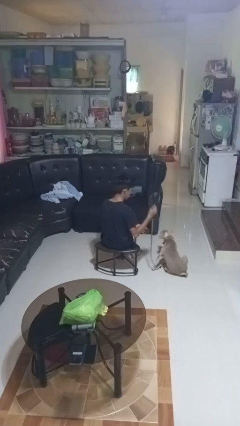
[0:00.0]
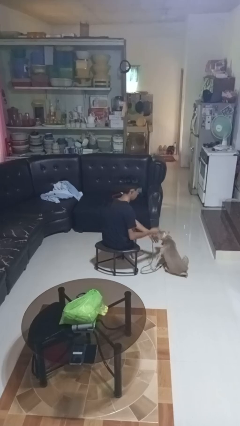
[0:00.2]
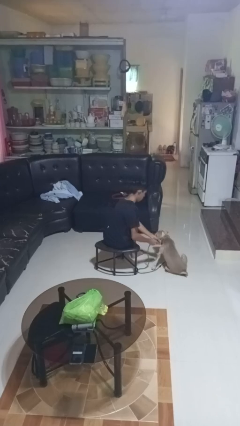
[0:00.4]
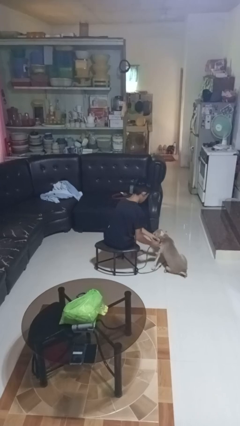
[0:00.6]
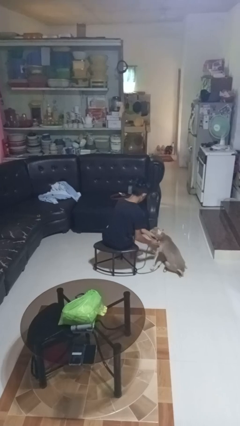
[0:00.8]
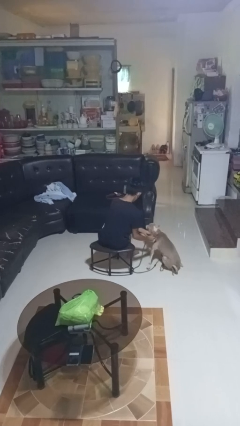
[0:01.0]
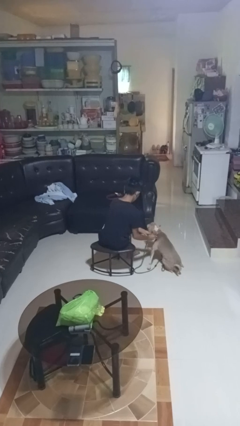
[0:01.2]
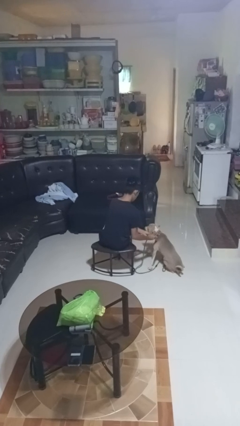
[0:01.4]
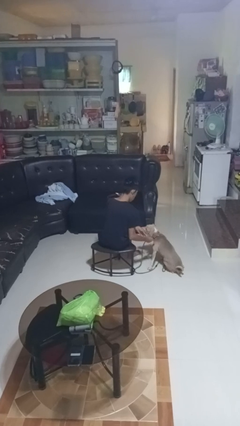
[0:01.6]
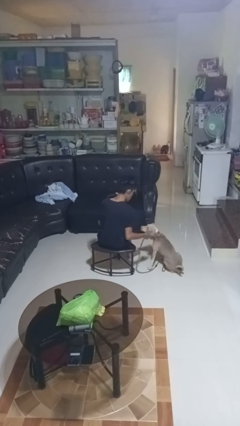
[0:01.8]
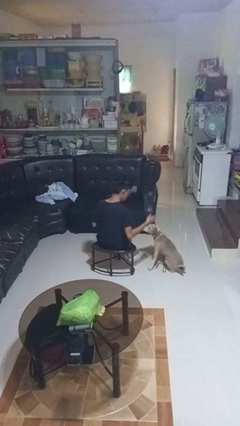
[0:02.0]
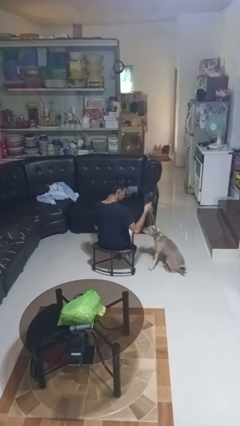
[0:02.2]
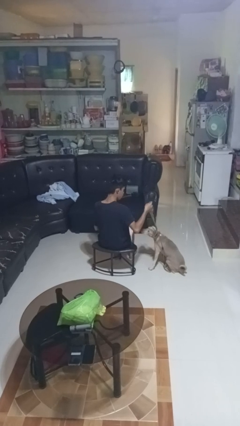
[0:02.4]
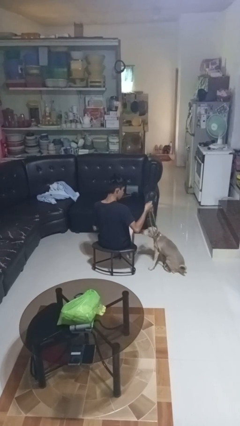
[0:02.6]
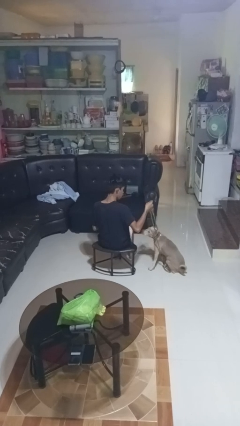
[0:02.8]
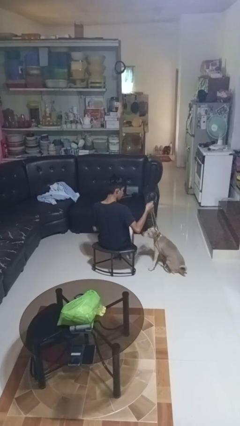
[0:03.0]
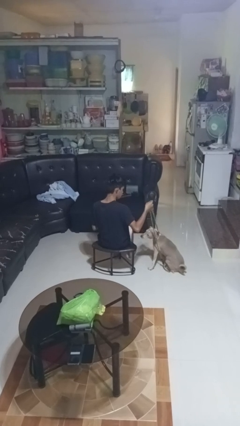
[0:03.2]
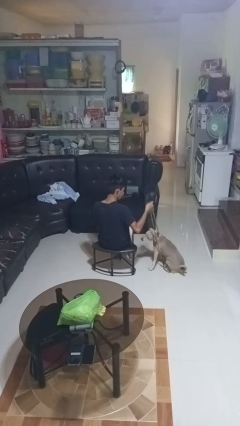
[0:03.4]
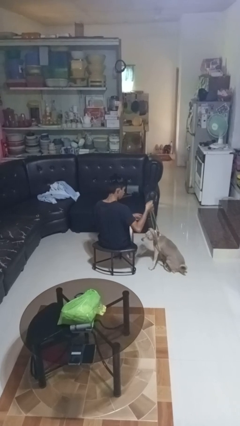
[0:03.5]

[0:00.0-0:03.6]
person attaches leash to dog

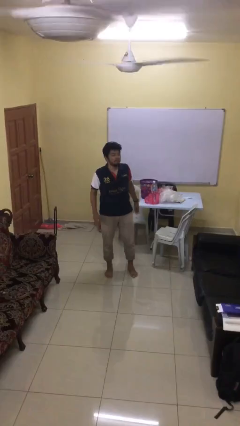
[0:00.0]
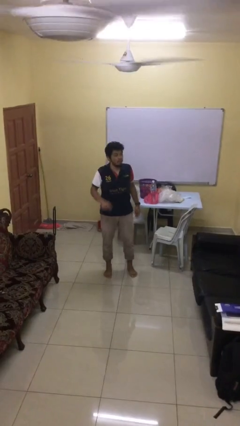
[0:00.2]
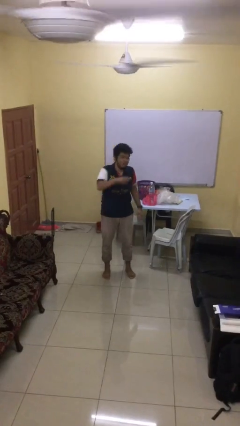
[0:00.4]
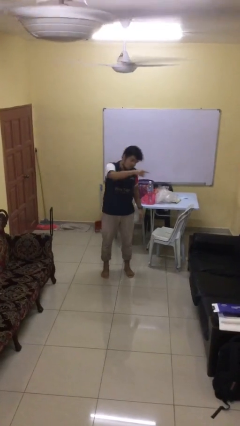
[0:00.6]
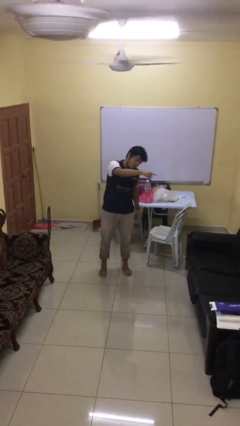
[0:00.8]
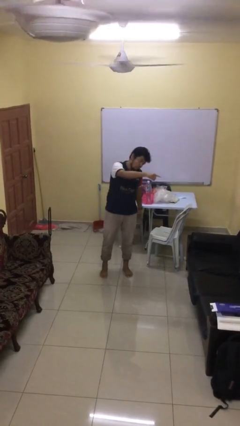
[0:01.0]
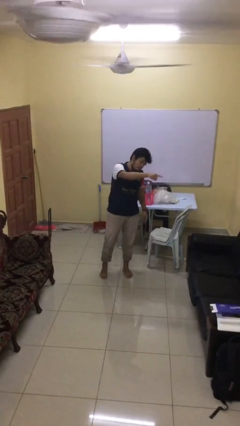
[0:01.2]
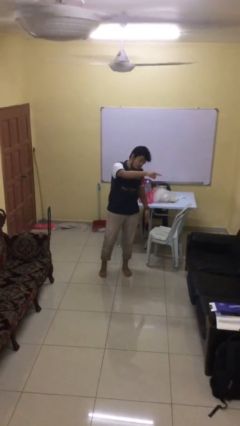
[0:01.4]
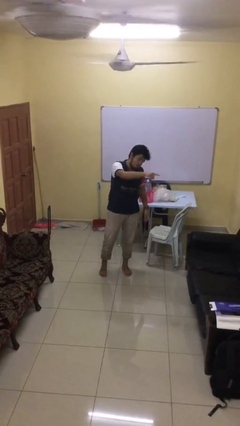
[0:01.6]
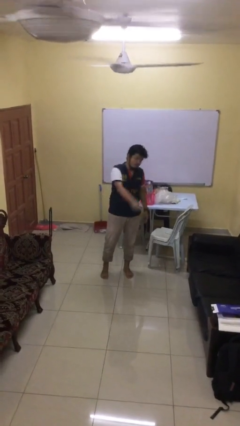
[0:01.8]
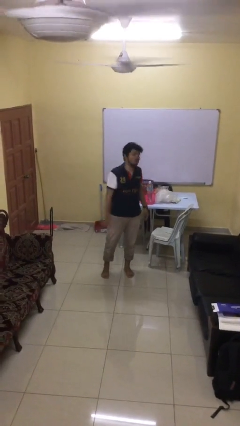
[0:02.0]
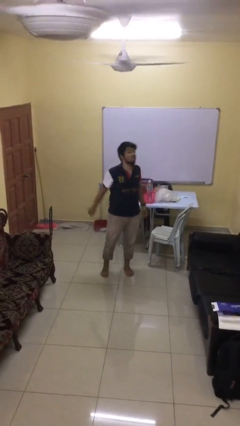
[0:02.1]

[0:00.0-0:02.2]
person points at person

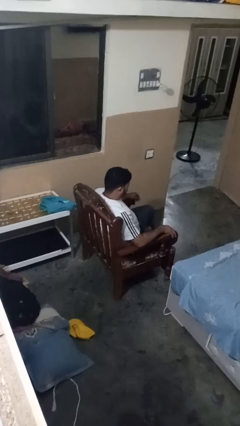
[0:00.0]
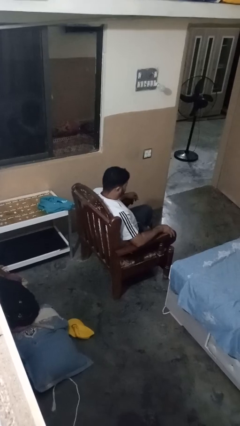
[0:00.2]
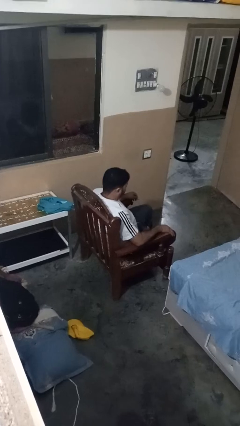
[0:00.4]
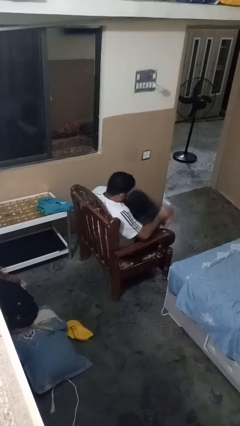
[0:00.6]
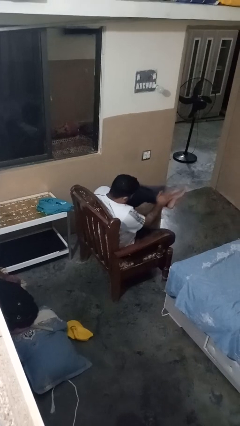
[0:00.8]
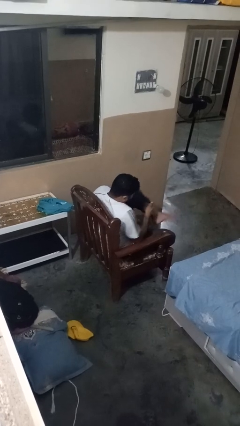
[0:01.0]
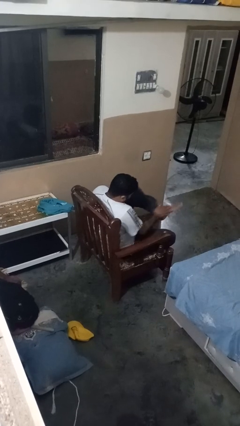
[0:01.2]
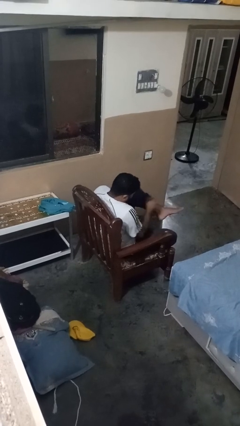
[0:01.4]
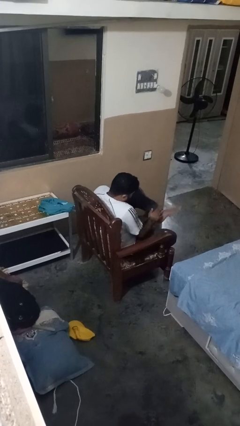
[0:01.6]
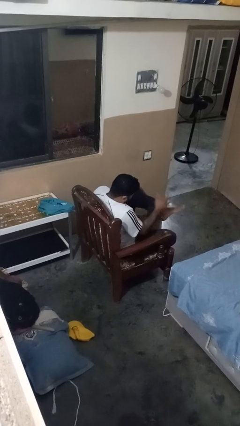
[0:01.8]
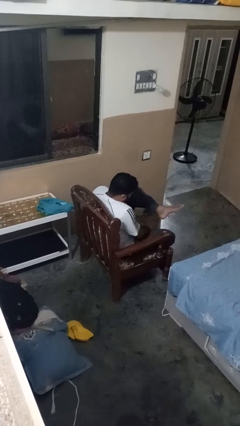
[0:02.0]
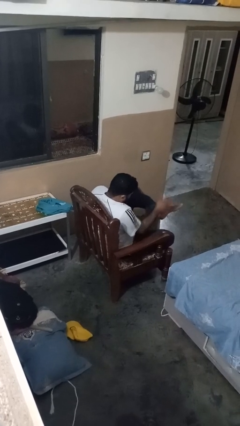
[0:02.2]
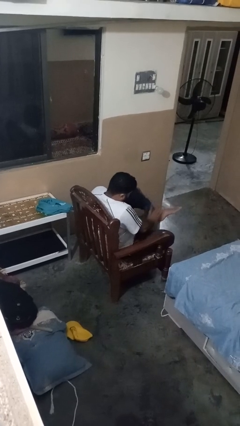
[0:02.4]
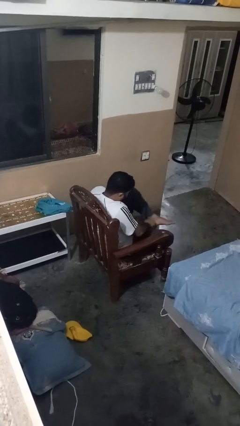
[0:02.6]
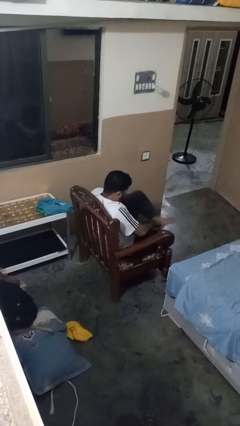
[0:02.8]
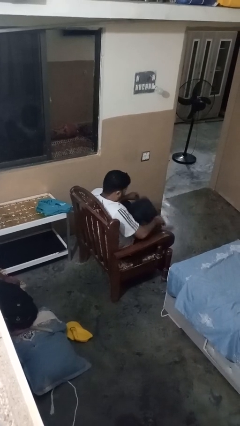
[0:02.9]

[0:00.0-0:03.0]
person swats bug

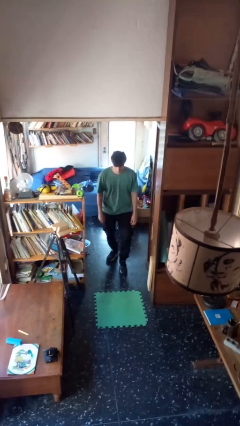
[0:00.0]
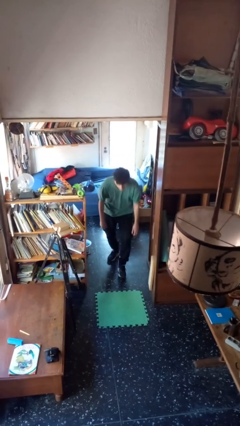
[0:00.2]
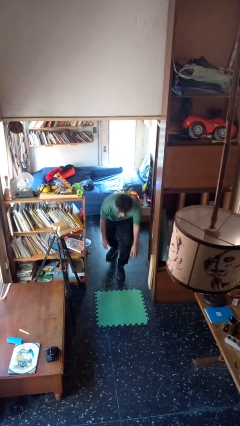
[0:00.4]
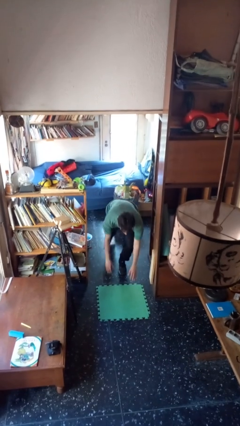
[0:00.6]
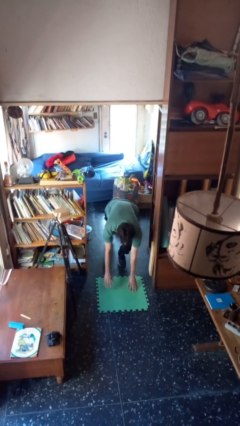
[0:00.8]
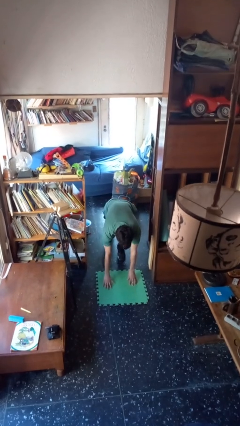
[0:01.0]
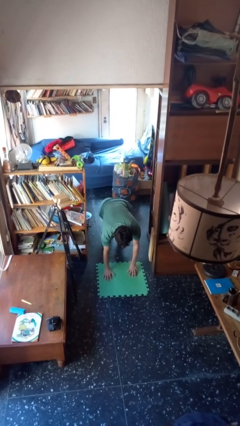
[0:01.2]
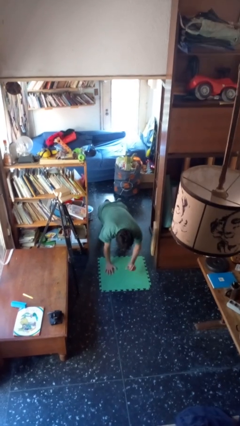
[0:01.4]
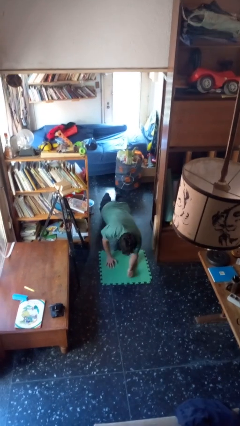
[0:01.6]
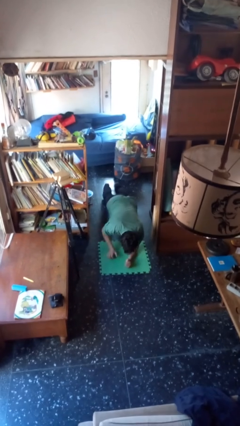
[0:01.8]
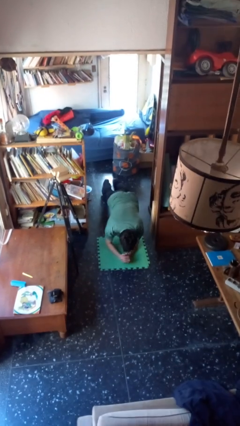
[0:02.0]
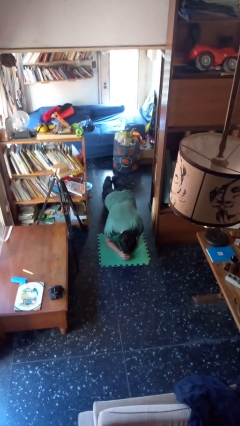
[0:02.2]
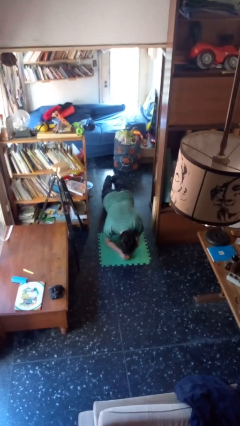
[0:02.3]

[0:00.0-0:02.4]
person exercises with plank

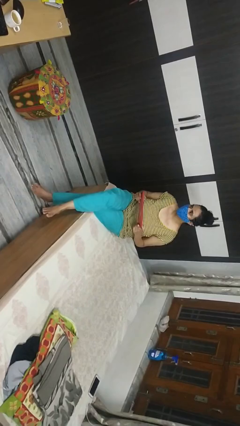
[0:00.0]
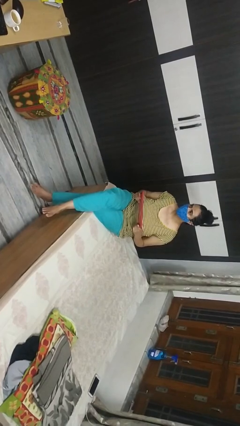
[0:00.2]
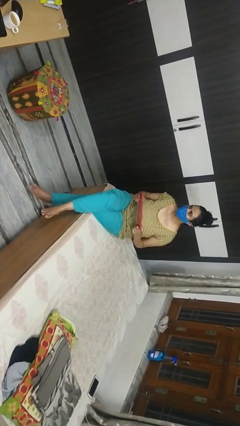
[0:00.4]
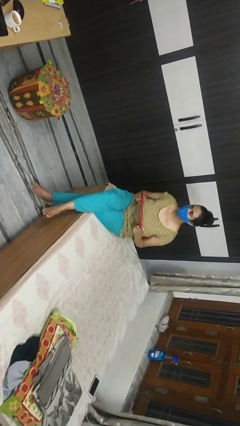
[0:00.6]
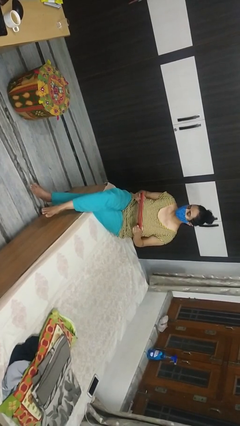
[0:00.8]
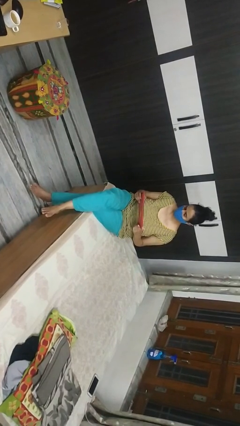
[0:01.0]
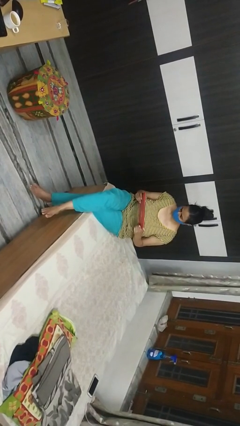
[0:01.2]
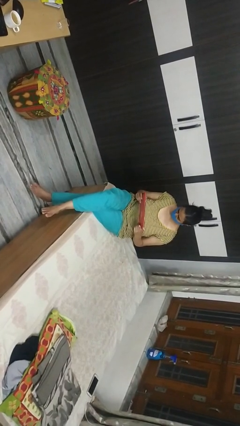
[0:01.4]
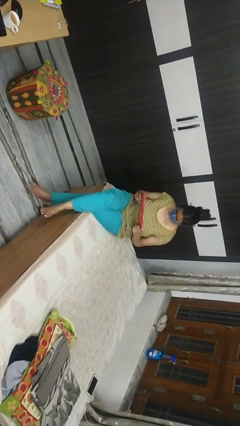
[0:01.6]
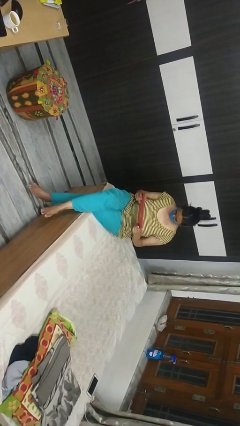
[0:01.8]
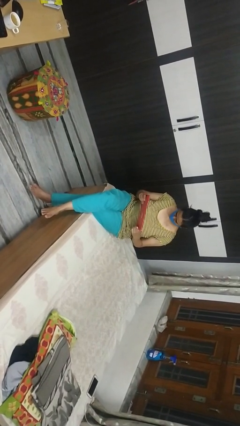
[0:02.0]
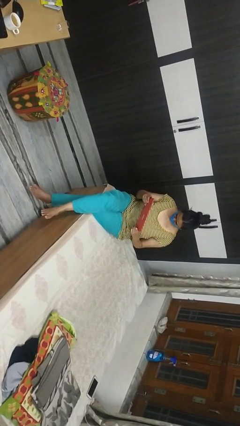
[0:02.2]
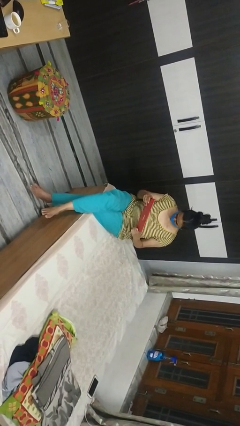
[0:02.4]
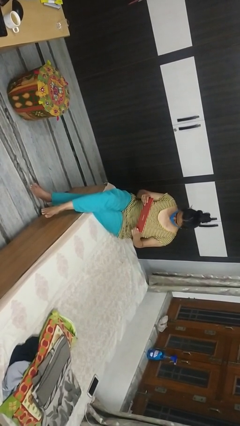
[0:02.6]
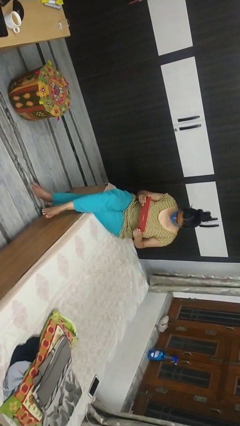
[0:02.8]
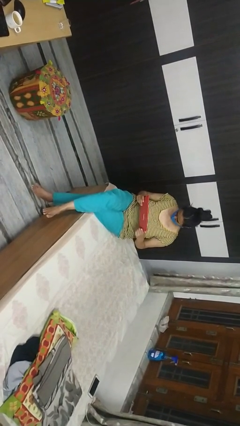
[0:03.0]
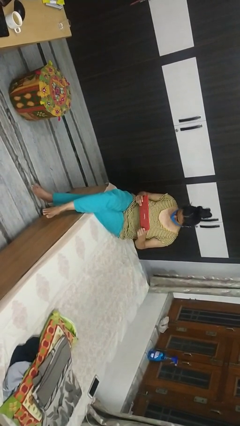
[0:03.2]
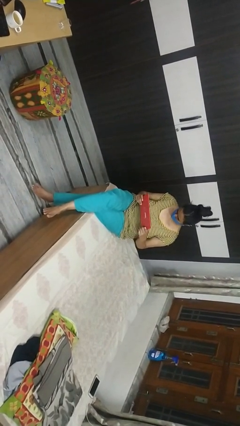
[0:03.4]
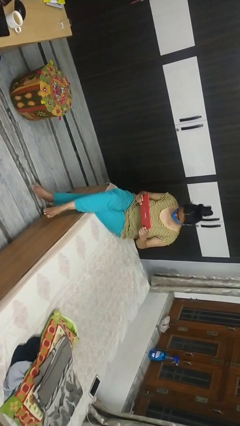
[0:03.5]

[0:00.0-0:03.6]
person interacts with handheld game

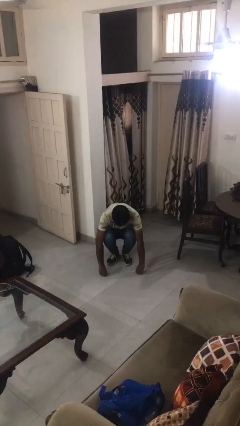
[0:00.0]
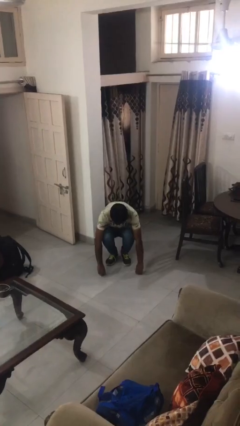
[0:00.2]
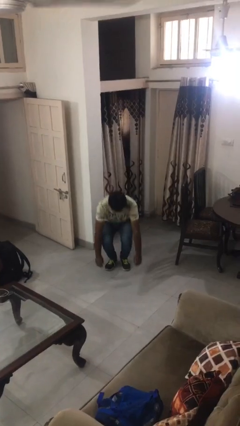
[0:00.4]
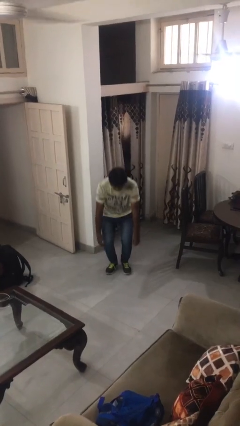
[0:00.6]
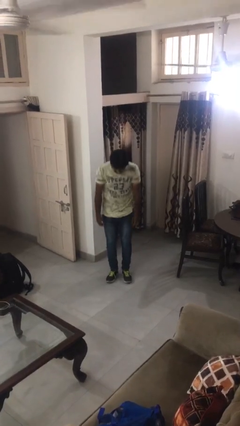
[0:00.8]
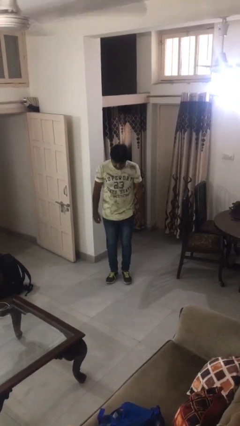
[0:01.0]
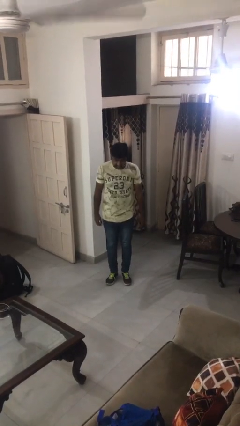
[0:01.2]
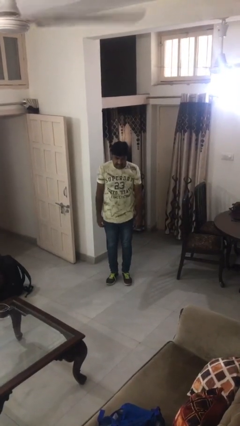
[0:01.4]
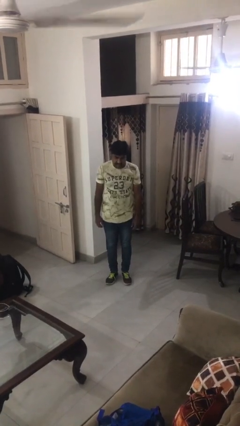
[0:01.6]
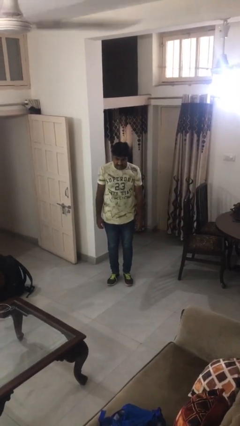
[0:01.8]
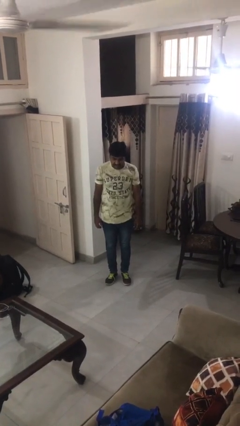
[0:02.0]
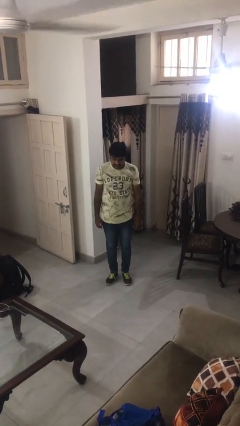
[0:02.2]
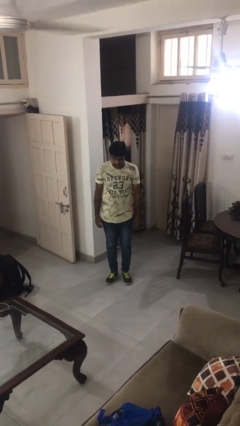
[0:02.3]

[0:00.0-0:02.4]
person stands up

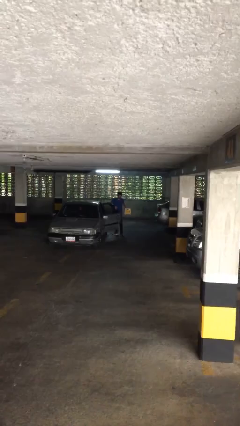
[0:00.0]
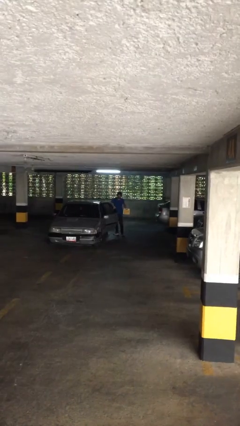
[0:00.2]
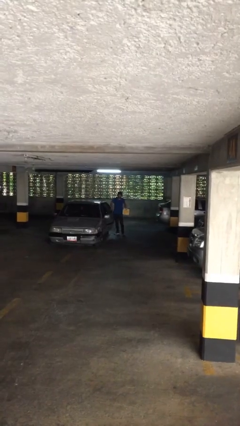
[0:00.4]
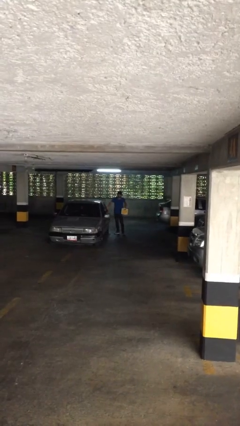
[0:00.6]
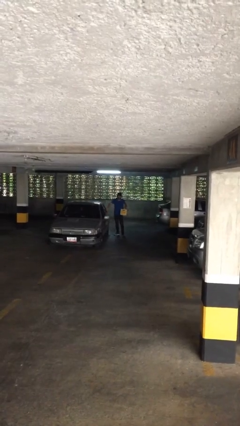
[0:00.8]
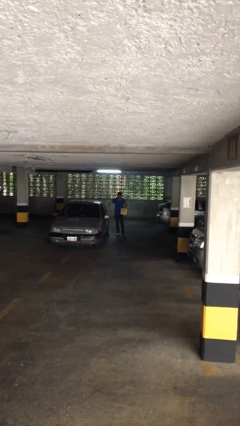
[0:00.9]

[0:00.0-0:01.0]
person closes car door
